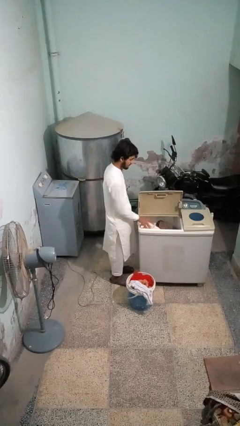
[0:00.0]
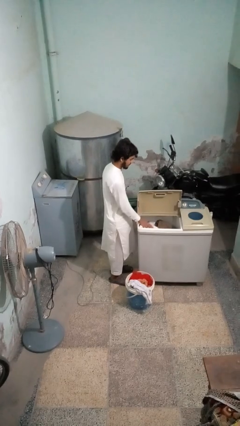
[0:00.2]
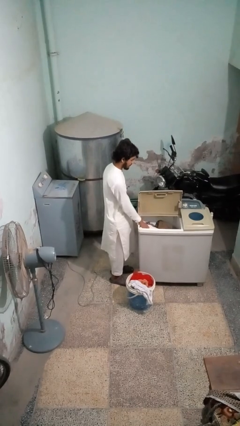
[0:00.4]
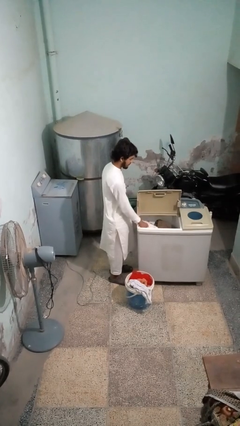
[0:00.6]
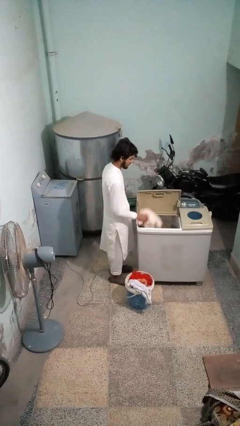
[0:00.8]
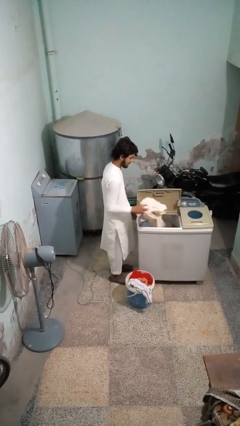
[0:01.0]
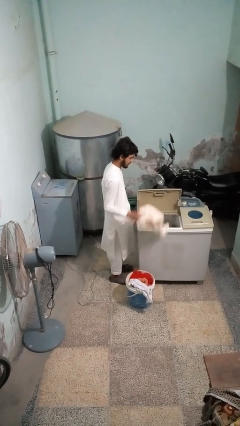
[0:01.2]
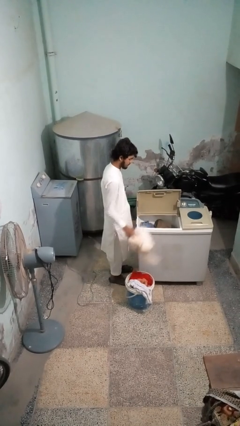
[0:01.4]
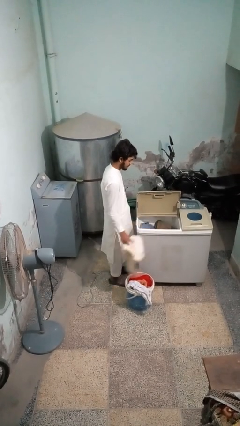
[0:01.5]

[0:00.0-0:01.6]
person unloads clotheswasher

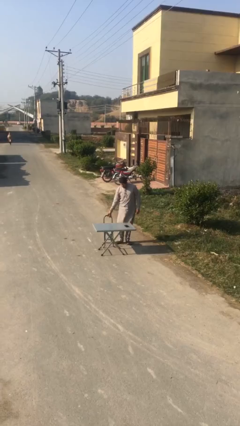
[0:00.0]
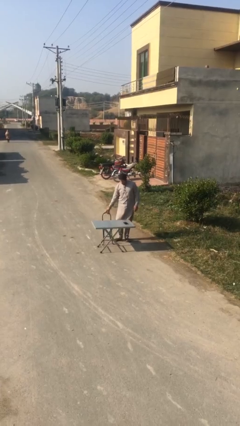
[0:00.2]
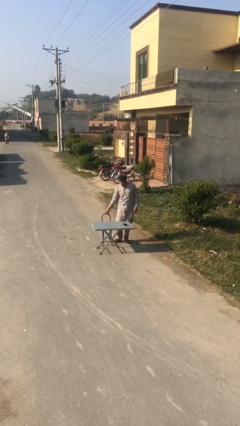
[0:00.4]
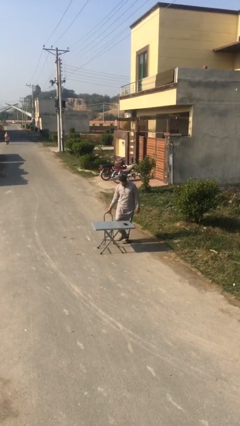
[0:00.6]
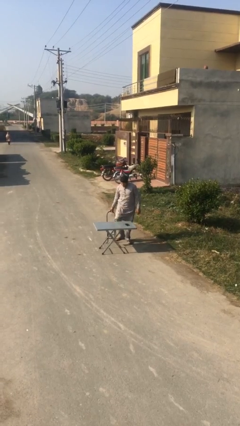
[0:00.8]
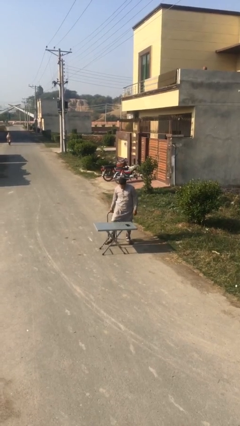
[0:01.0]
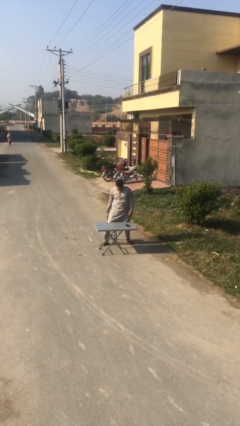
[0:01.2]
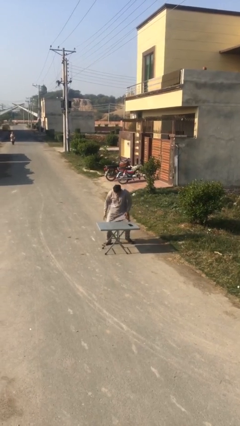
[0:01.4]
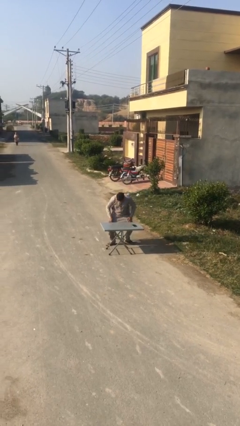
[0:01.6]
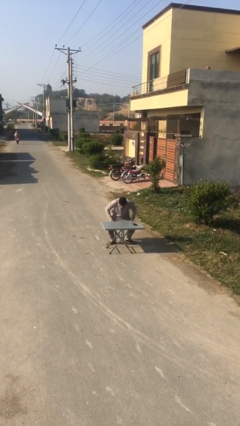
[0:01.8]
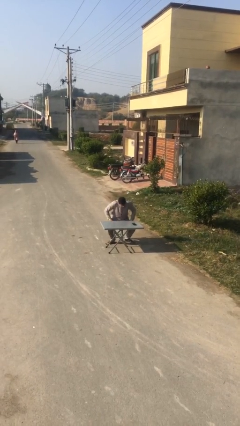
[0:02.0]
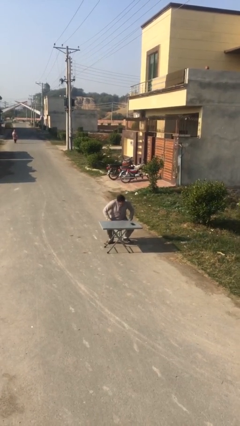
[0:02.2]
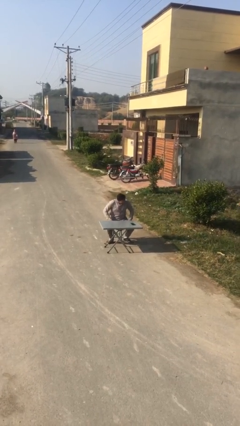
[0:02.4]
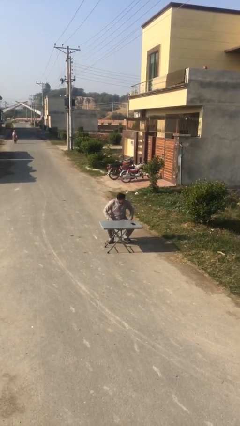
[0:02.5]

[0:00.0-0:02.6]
person sits down

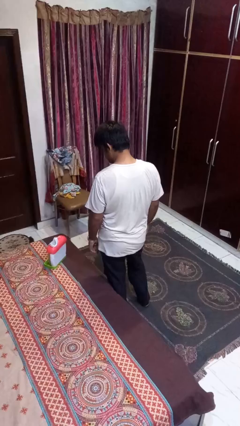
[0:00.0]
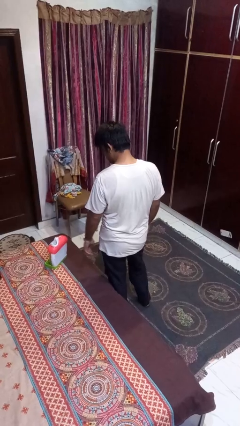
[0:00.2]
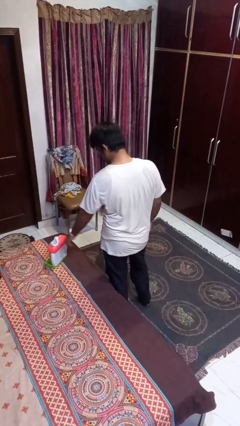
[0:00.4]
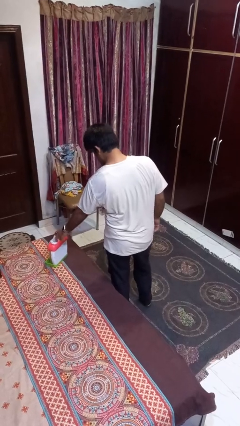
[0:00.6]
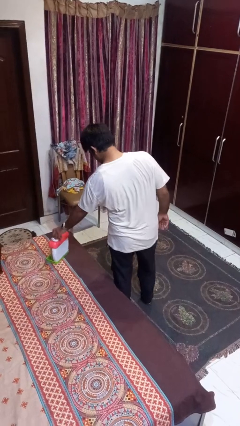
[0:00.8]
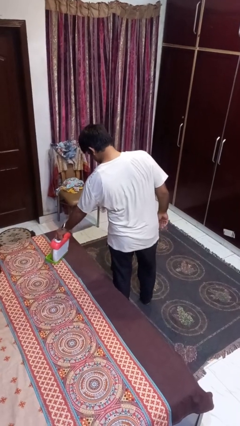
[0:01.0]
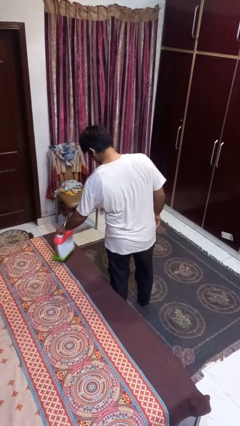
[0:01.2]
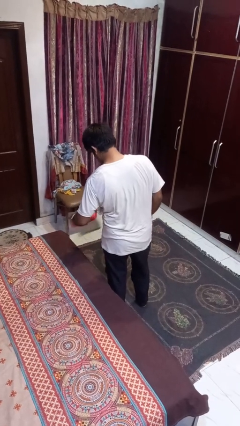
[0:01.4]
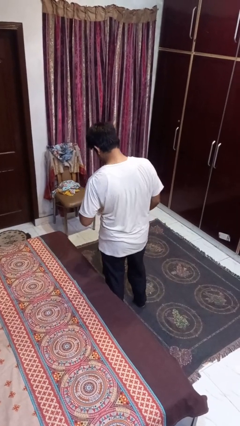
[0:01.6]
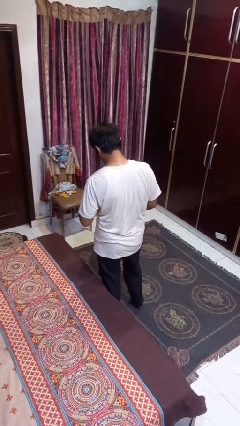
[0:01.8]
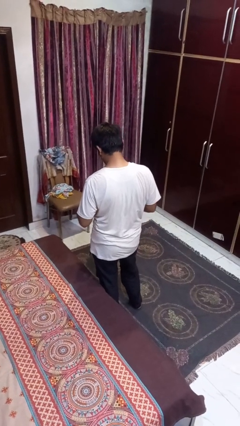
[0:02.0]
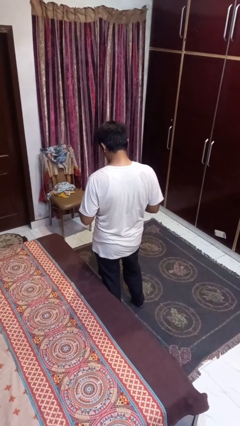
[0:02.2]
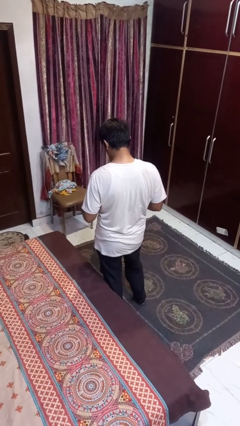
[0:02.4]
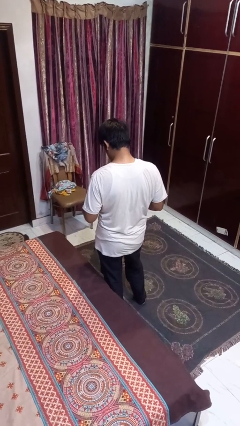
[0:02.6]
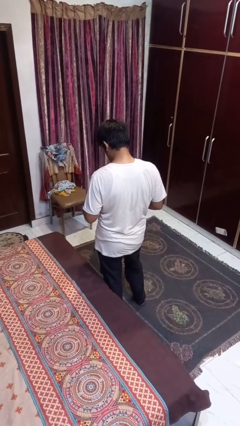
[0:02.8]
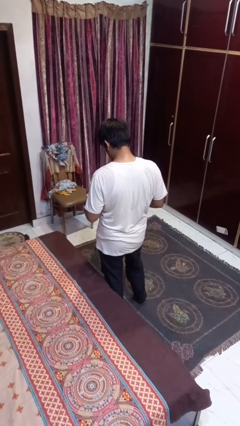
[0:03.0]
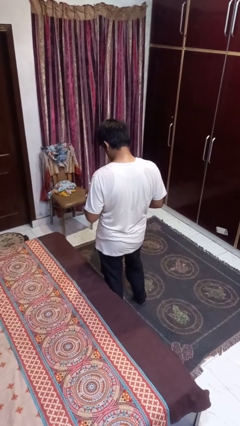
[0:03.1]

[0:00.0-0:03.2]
person picks up object from bed

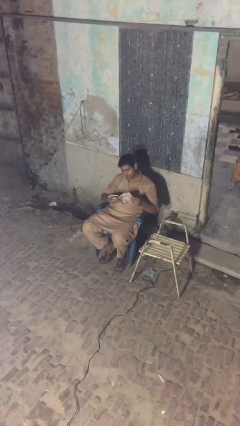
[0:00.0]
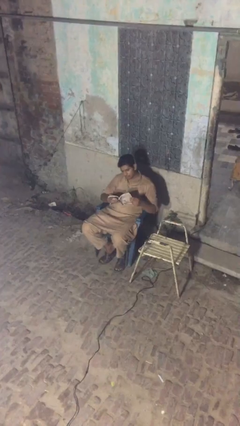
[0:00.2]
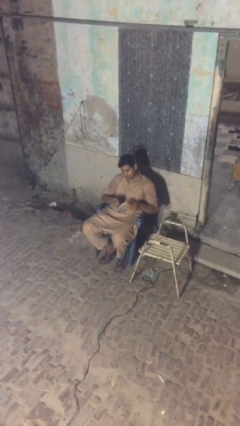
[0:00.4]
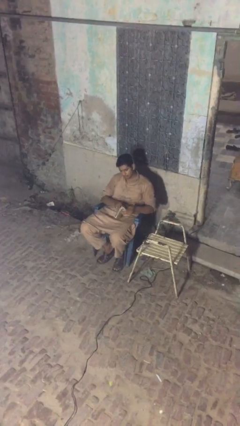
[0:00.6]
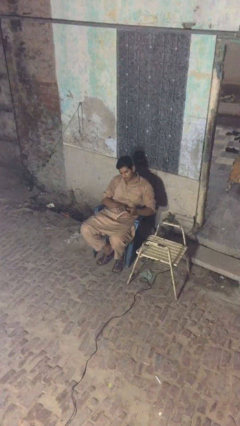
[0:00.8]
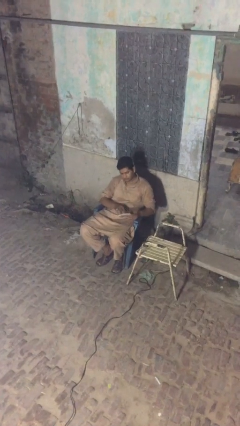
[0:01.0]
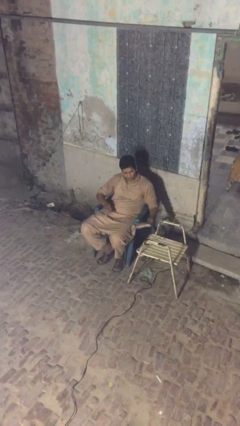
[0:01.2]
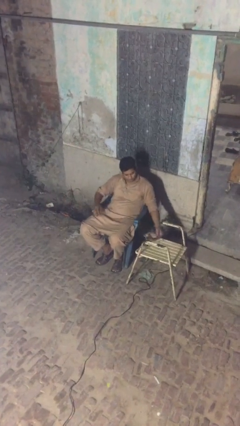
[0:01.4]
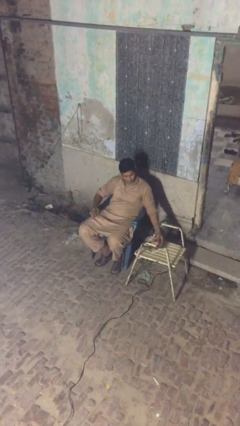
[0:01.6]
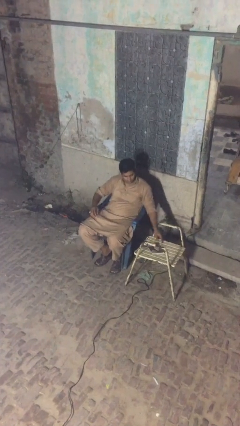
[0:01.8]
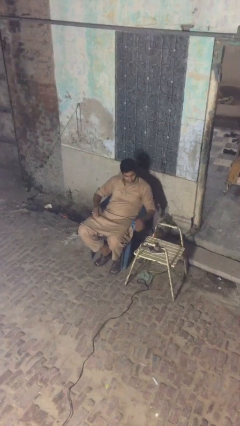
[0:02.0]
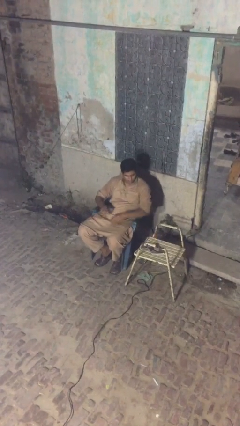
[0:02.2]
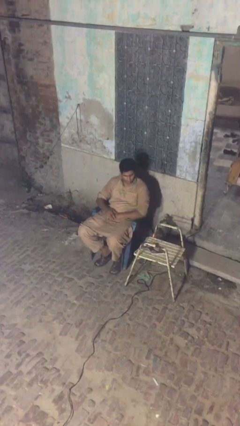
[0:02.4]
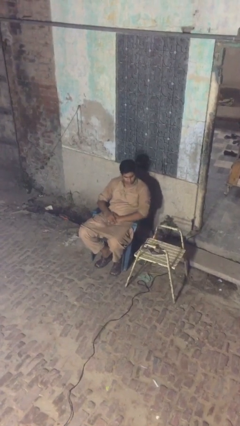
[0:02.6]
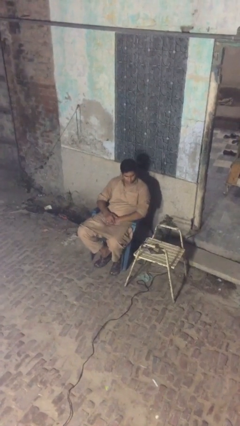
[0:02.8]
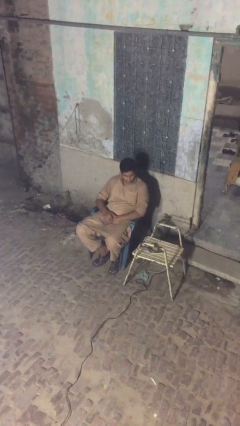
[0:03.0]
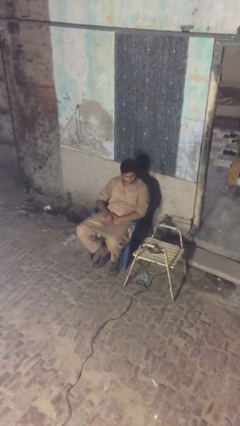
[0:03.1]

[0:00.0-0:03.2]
person puts down object on table

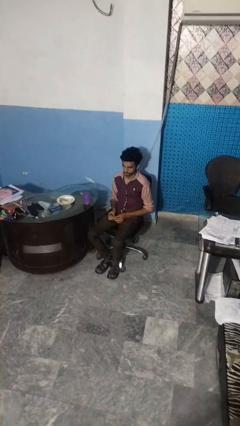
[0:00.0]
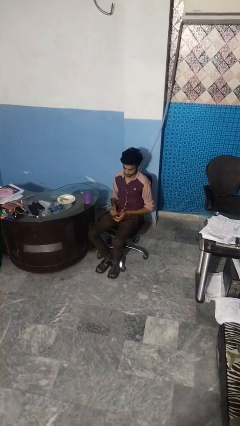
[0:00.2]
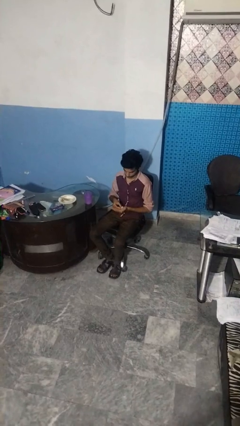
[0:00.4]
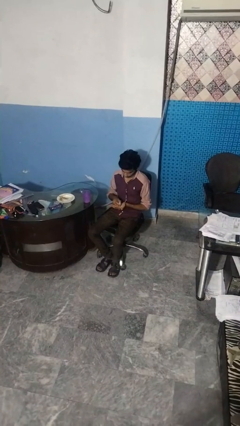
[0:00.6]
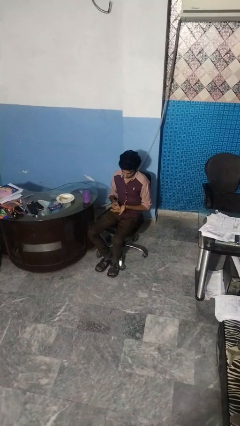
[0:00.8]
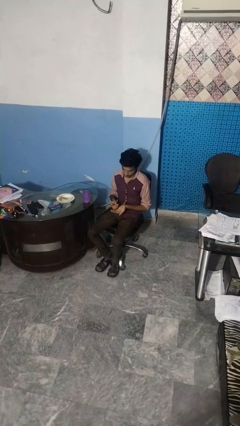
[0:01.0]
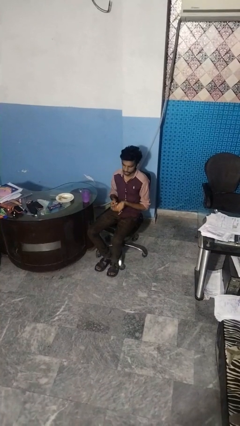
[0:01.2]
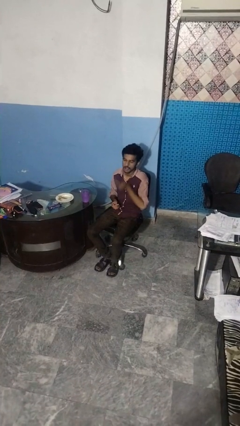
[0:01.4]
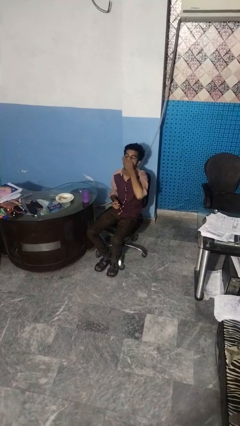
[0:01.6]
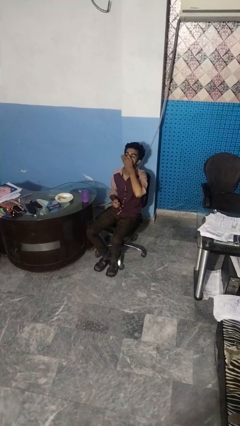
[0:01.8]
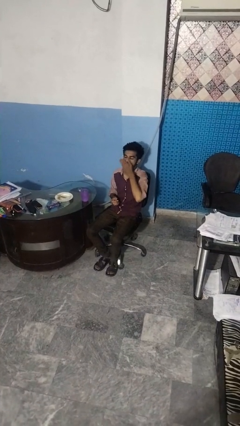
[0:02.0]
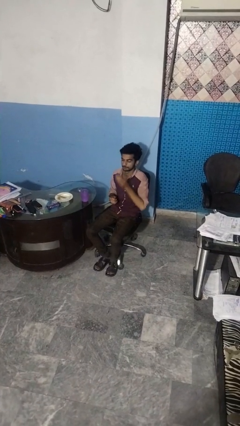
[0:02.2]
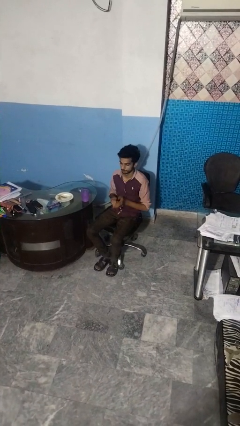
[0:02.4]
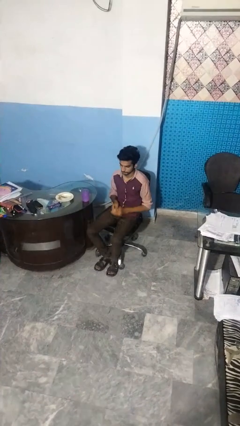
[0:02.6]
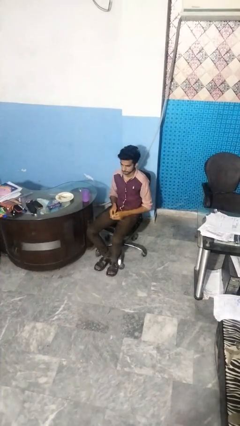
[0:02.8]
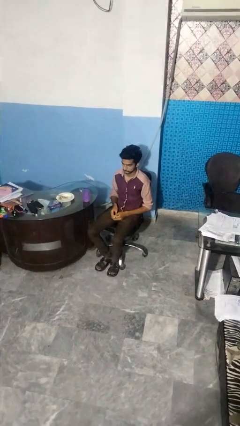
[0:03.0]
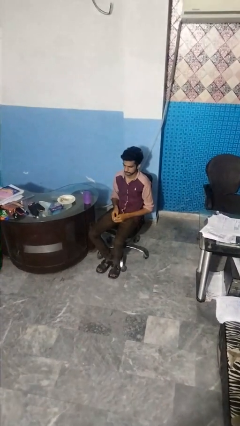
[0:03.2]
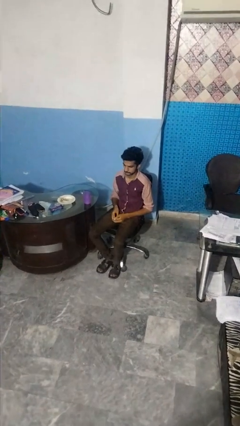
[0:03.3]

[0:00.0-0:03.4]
person takes medicine pills

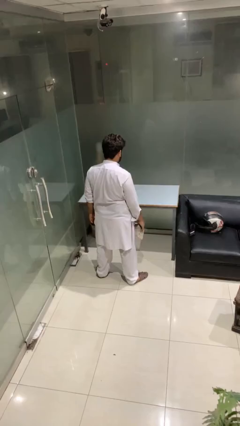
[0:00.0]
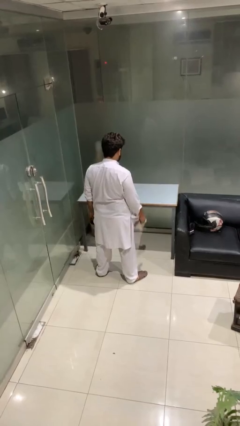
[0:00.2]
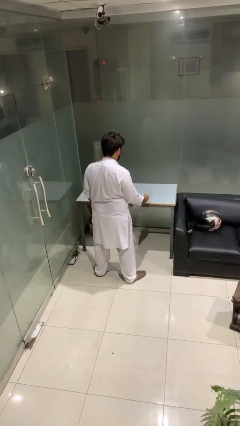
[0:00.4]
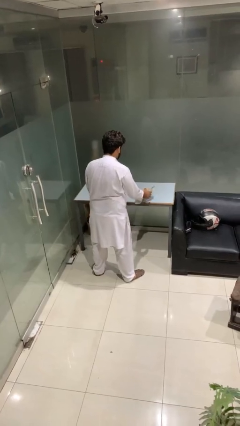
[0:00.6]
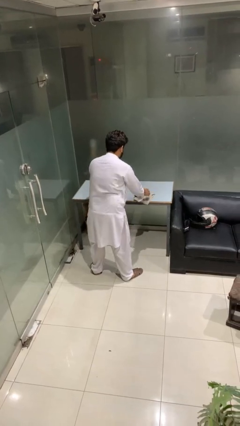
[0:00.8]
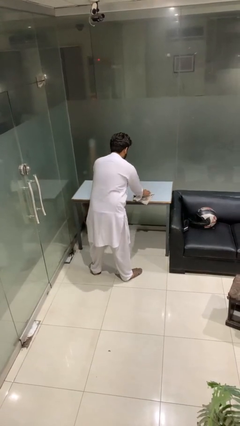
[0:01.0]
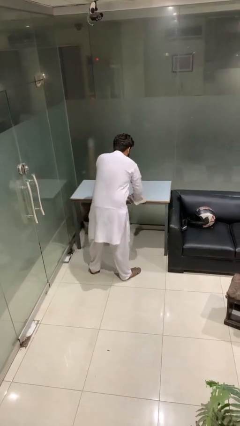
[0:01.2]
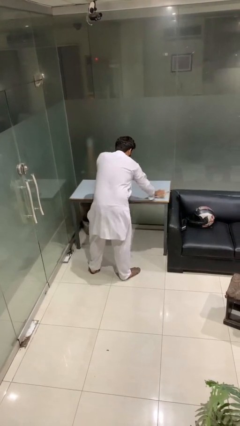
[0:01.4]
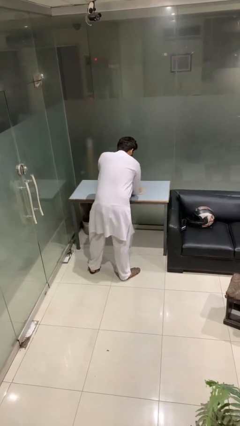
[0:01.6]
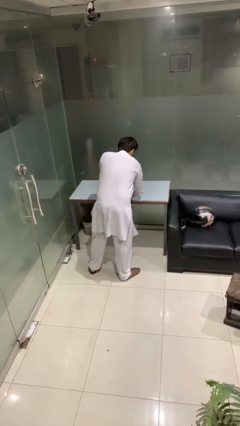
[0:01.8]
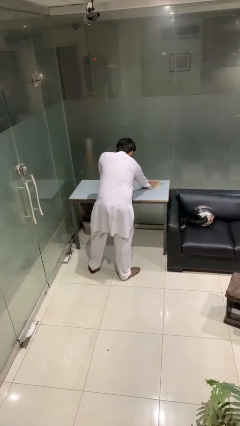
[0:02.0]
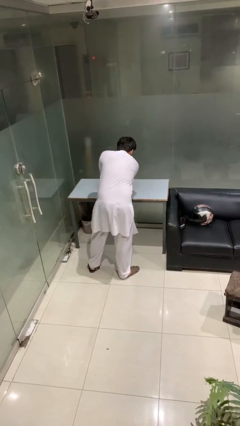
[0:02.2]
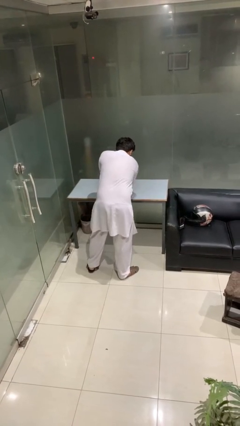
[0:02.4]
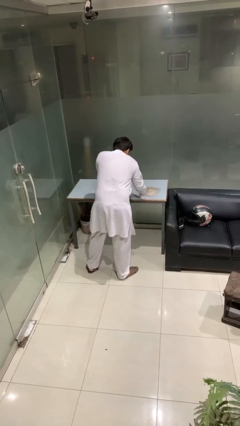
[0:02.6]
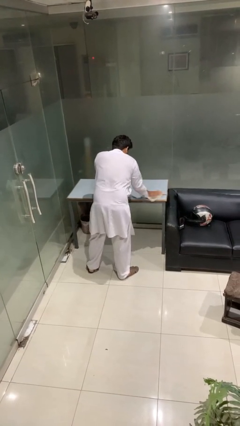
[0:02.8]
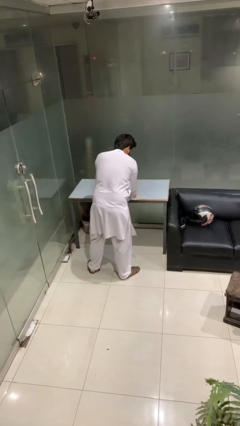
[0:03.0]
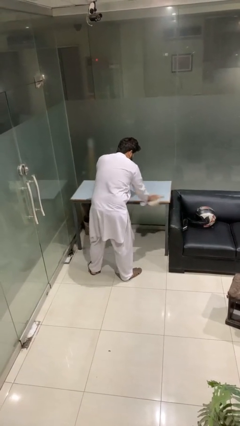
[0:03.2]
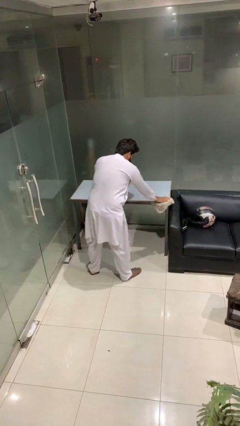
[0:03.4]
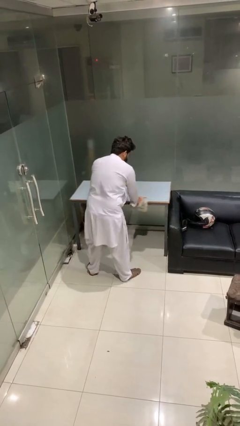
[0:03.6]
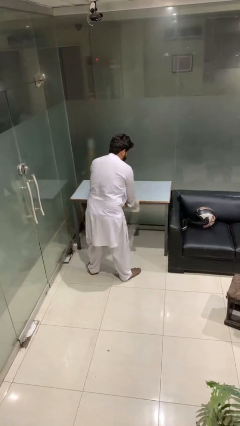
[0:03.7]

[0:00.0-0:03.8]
person cleans table with rag

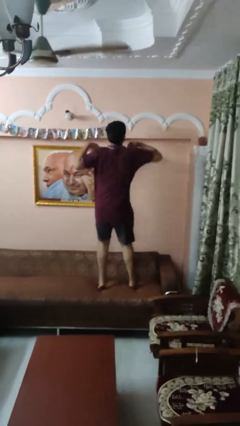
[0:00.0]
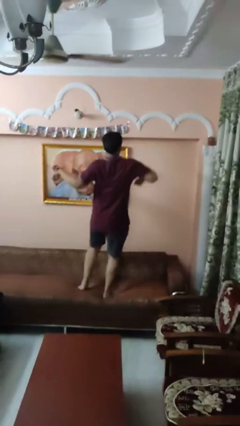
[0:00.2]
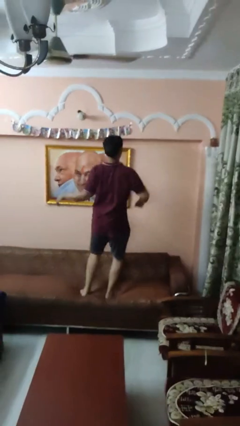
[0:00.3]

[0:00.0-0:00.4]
person jumps on couch
